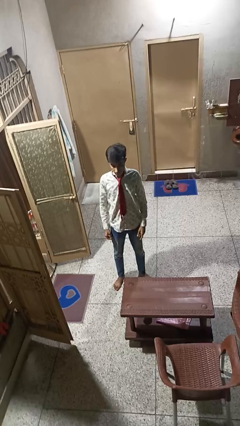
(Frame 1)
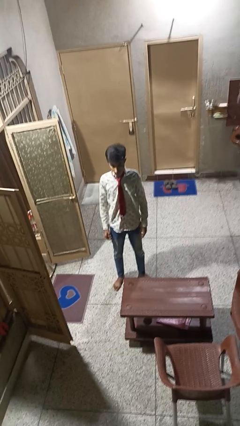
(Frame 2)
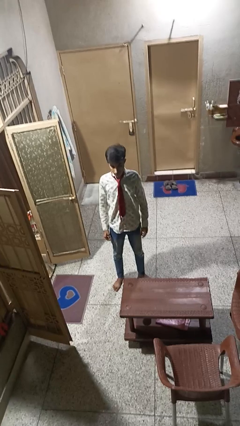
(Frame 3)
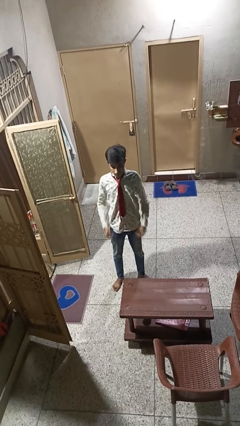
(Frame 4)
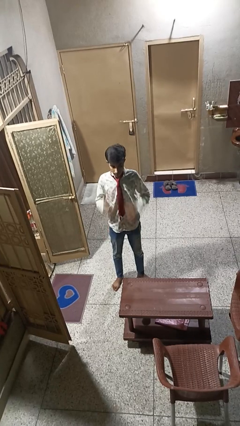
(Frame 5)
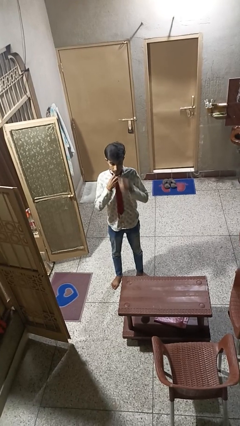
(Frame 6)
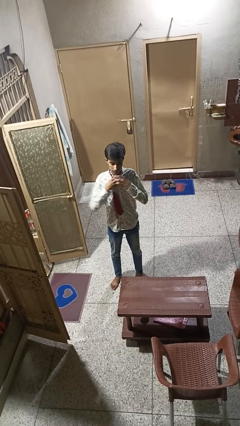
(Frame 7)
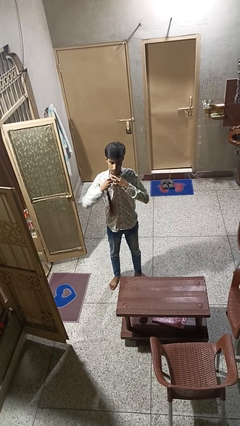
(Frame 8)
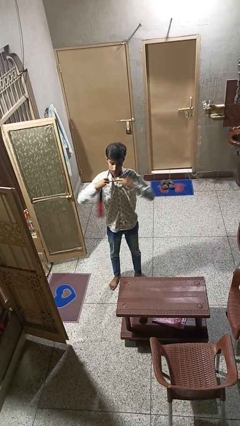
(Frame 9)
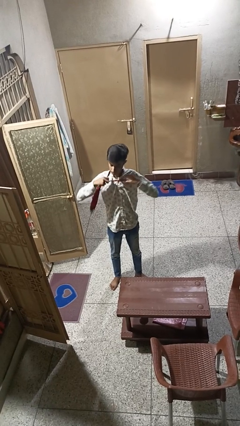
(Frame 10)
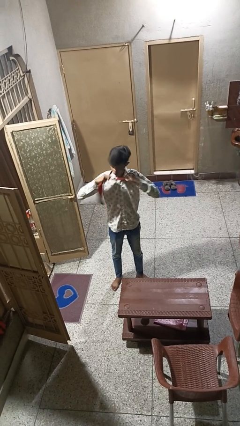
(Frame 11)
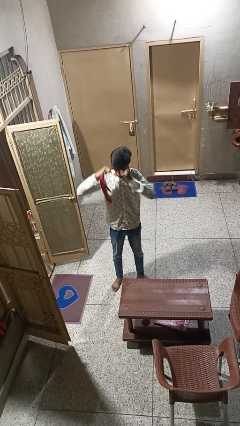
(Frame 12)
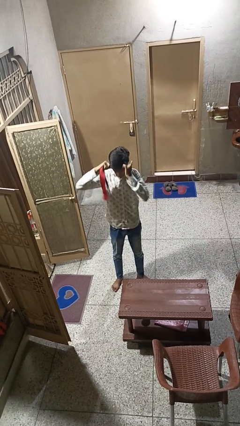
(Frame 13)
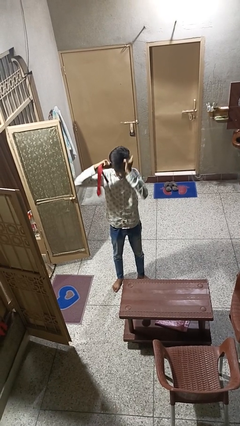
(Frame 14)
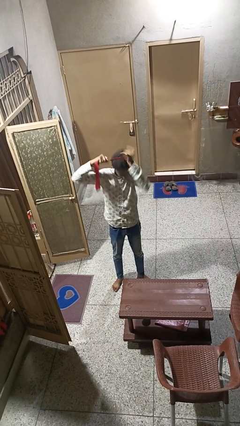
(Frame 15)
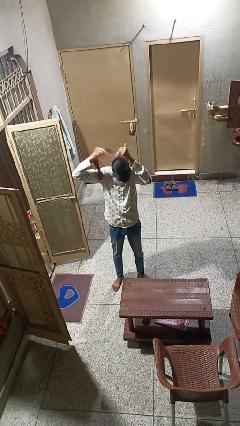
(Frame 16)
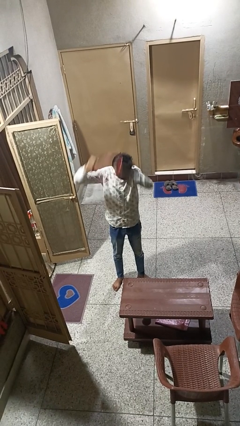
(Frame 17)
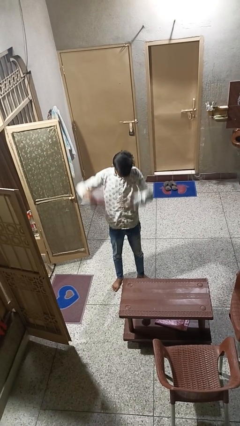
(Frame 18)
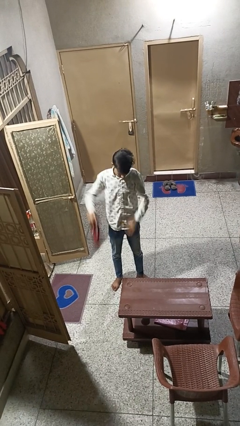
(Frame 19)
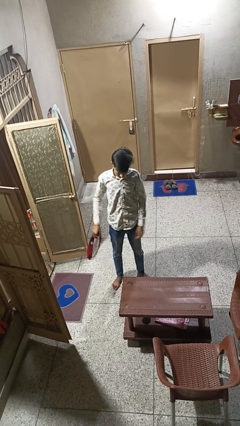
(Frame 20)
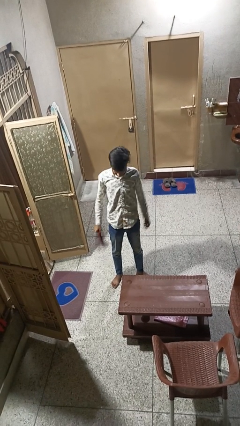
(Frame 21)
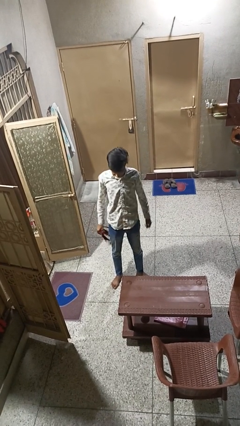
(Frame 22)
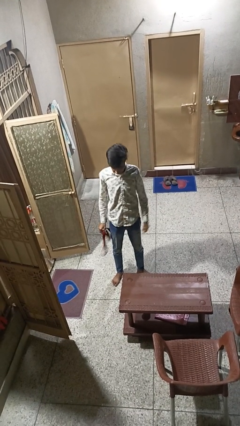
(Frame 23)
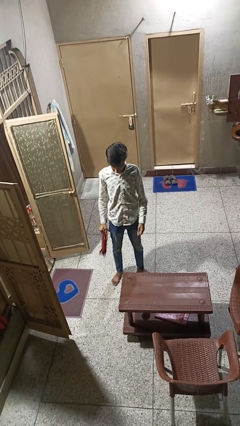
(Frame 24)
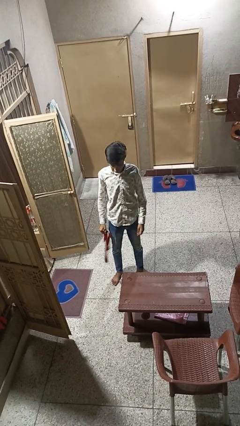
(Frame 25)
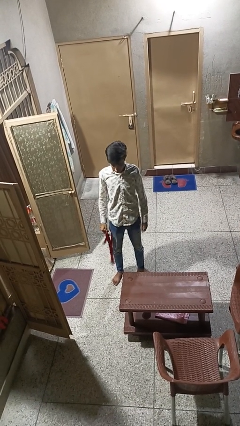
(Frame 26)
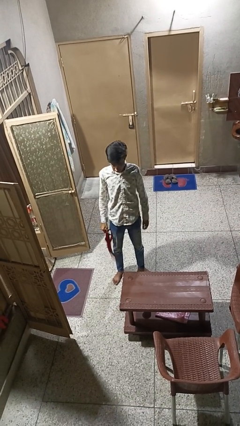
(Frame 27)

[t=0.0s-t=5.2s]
person takes off necktie

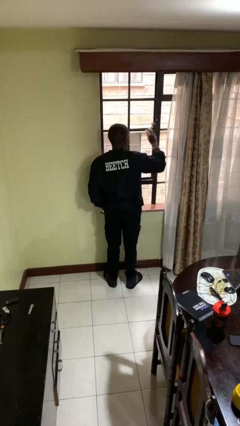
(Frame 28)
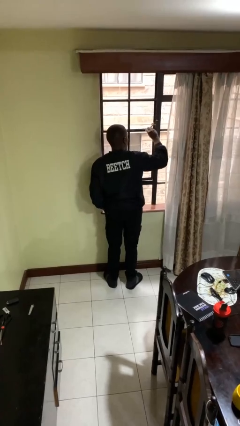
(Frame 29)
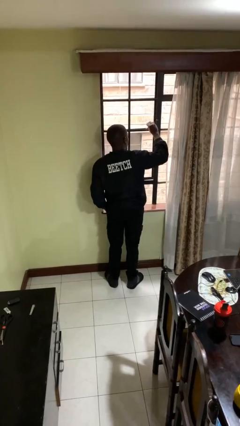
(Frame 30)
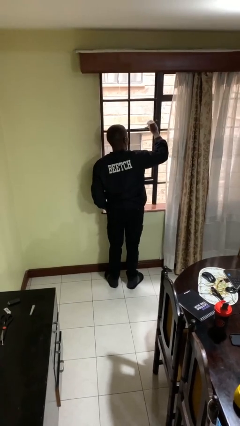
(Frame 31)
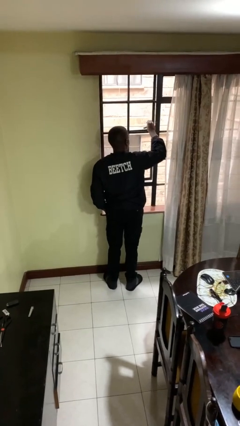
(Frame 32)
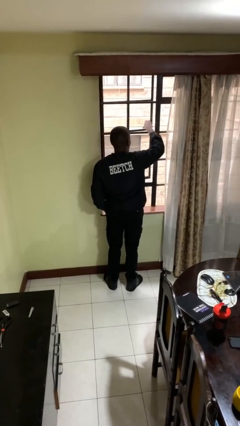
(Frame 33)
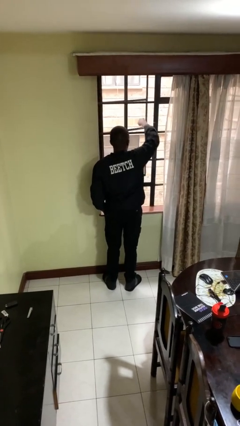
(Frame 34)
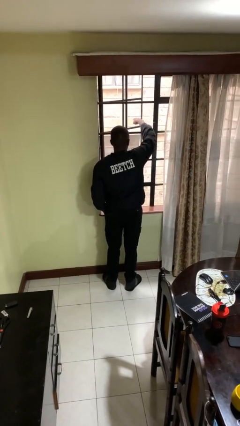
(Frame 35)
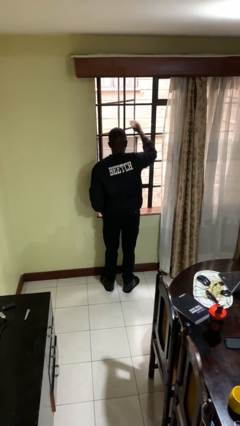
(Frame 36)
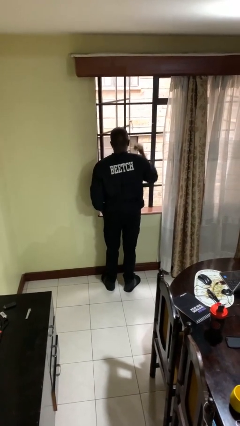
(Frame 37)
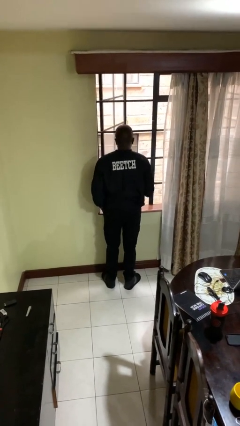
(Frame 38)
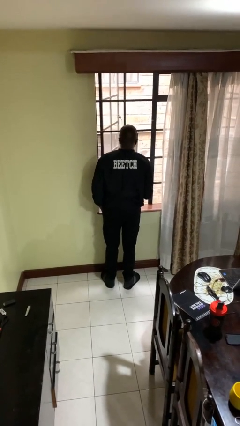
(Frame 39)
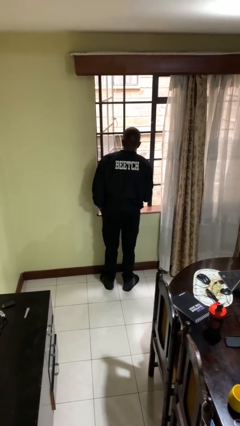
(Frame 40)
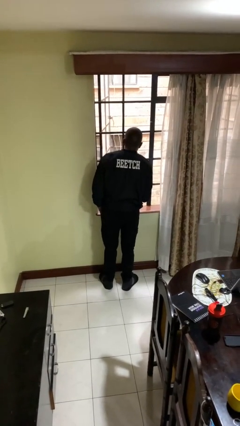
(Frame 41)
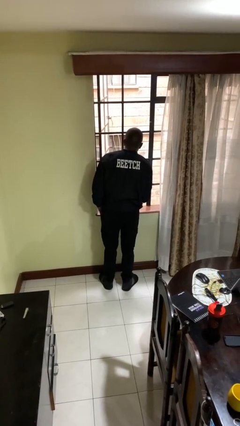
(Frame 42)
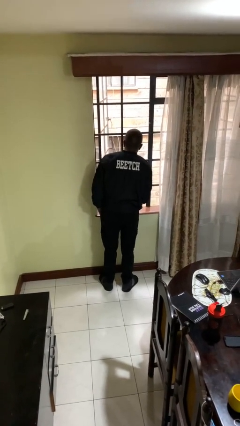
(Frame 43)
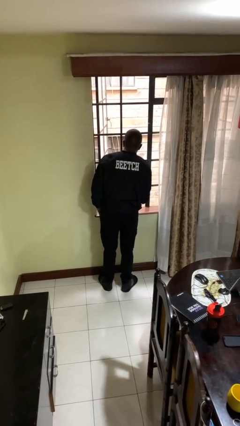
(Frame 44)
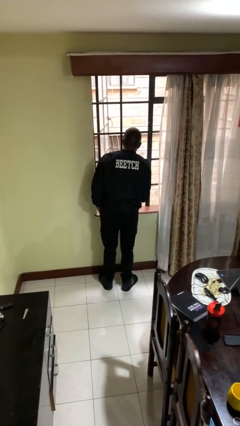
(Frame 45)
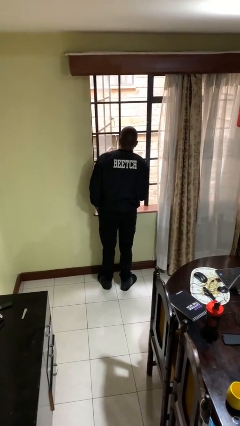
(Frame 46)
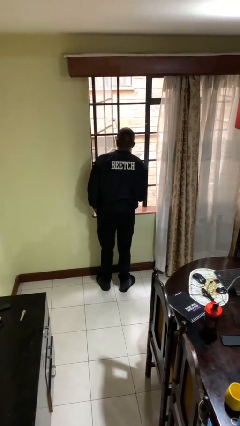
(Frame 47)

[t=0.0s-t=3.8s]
person opens home window

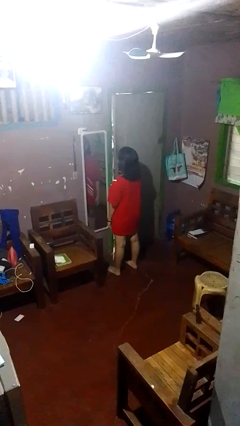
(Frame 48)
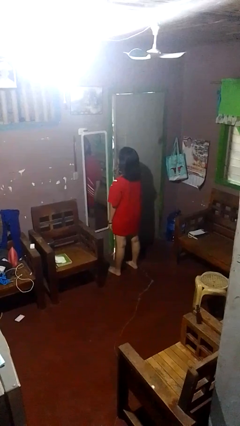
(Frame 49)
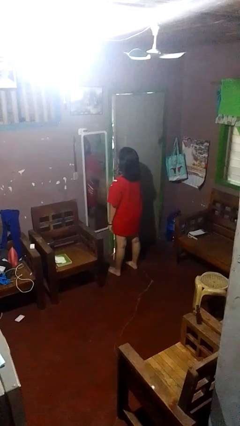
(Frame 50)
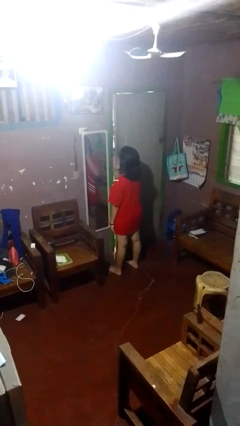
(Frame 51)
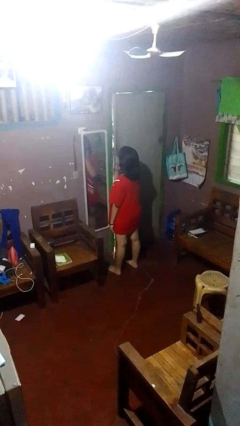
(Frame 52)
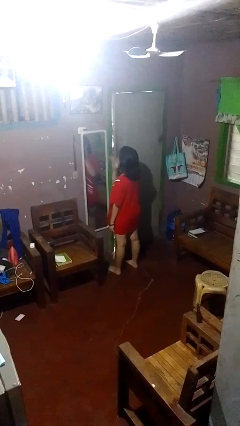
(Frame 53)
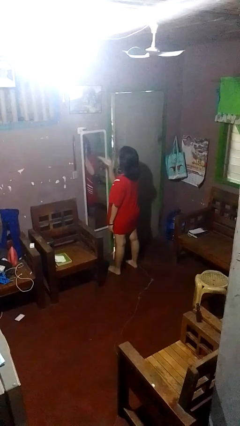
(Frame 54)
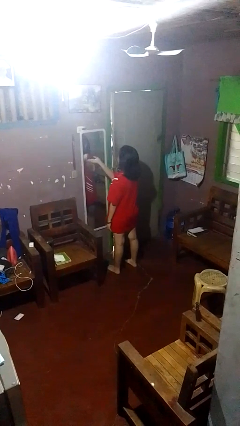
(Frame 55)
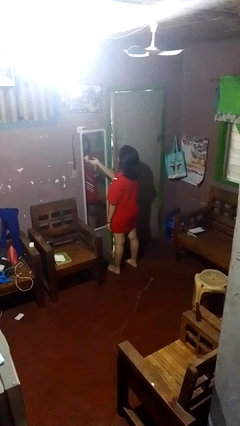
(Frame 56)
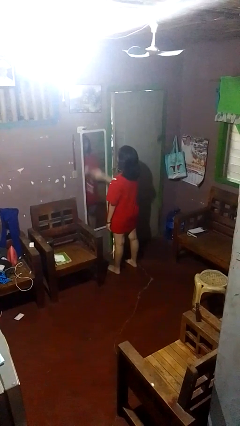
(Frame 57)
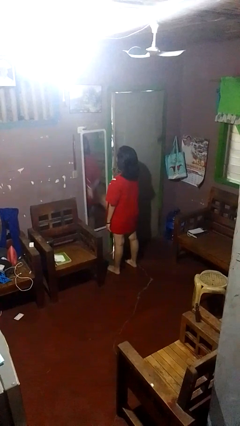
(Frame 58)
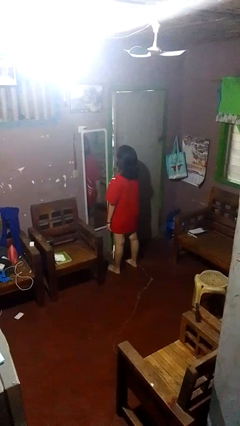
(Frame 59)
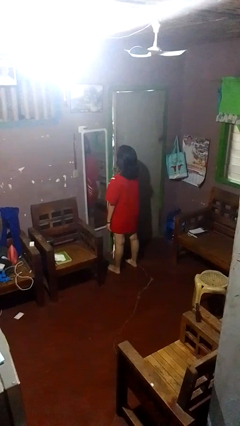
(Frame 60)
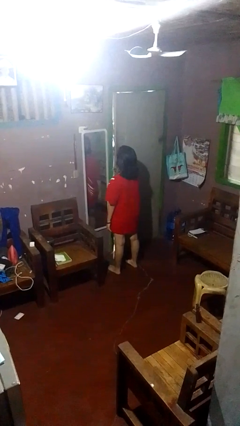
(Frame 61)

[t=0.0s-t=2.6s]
person gestures blow kiss

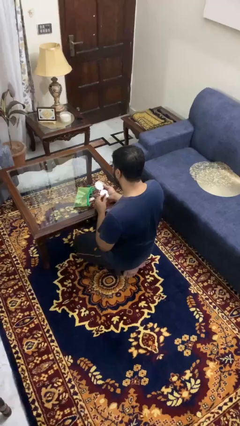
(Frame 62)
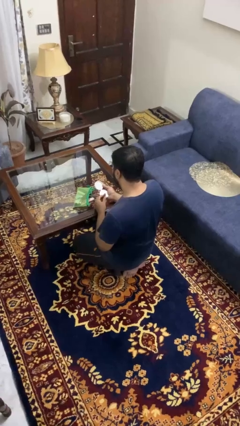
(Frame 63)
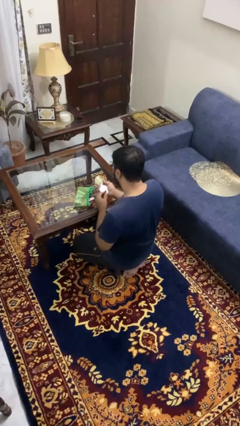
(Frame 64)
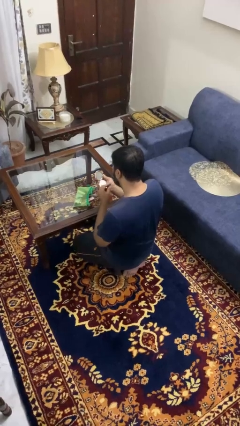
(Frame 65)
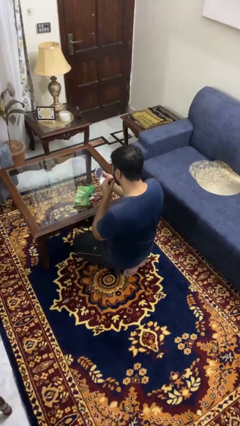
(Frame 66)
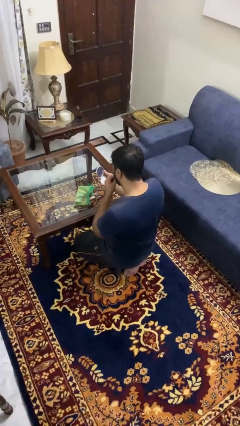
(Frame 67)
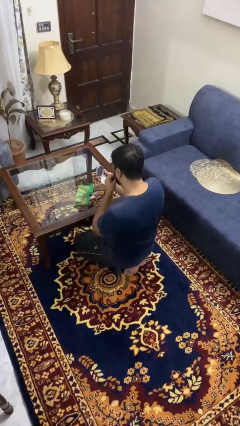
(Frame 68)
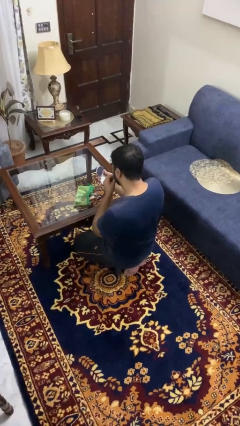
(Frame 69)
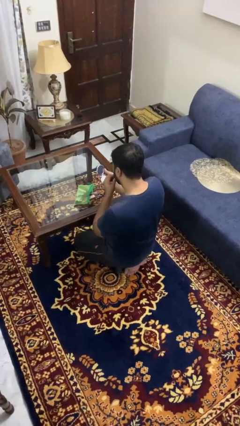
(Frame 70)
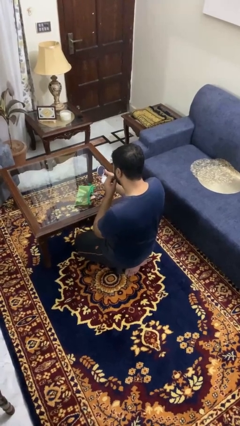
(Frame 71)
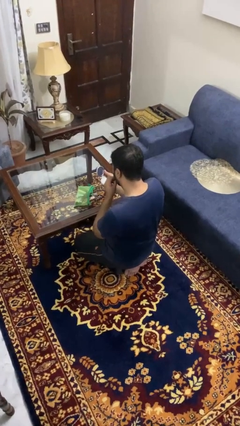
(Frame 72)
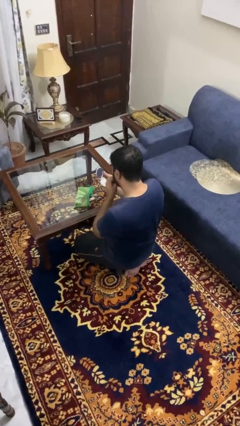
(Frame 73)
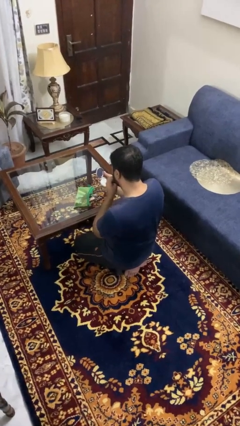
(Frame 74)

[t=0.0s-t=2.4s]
person applies lip makeup

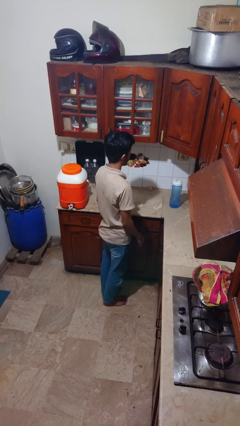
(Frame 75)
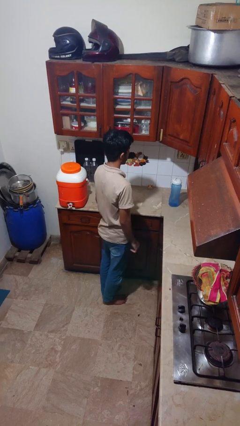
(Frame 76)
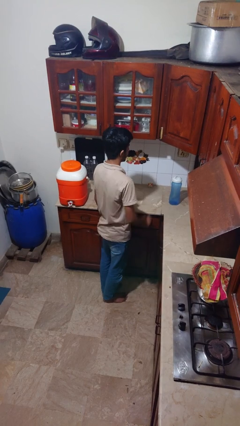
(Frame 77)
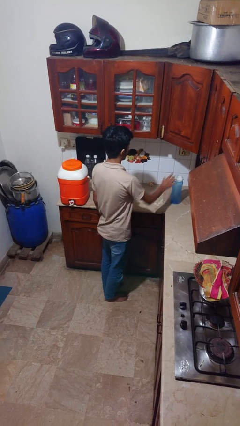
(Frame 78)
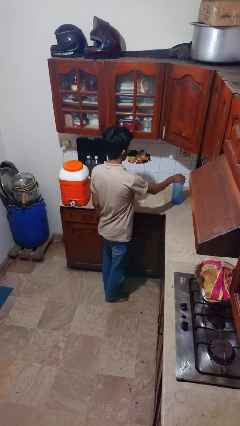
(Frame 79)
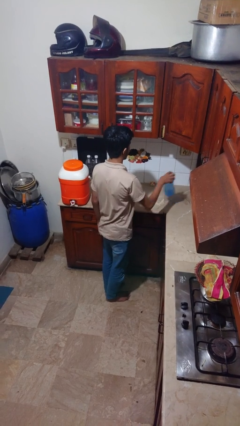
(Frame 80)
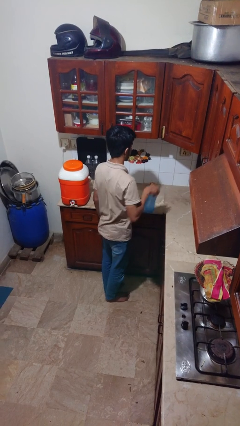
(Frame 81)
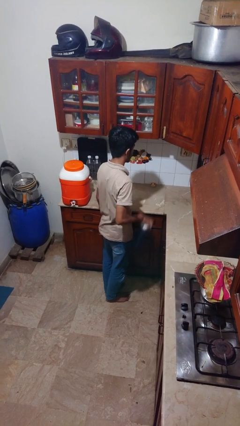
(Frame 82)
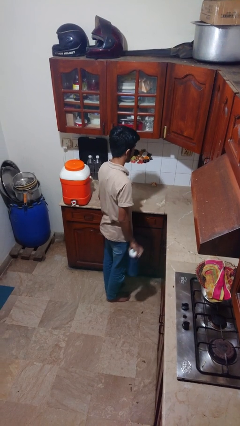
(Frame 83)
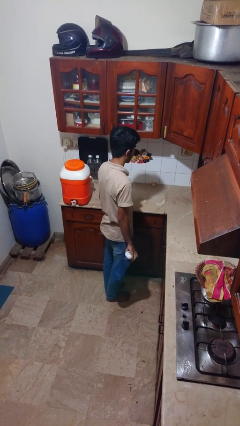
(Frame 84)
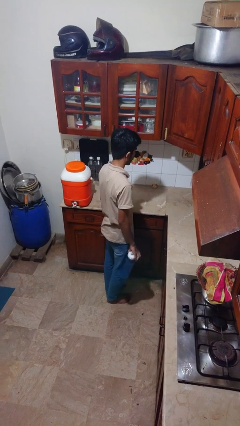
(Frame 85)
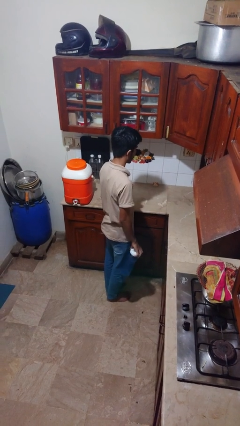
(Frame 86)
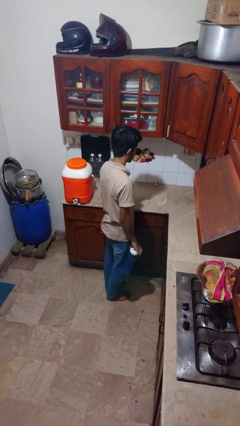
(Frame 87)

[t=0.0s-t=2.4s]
person picks up object from countertop

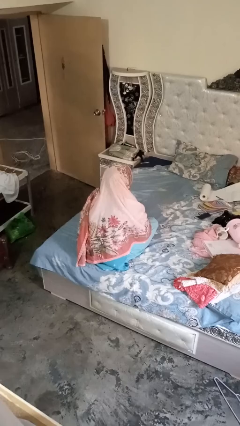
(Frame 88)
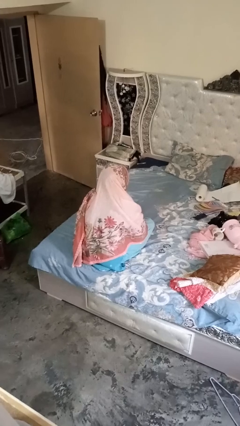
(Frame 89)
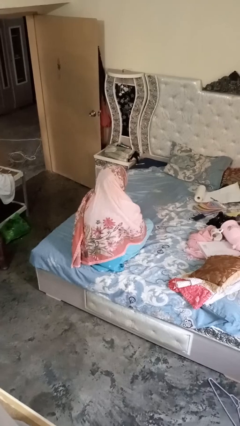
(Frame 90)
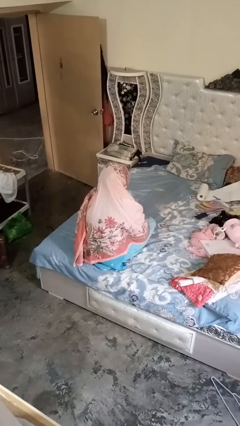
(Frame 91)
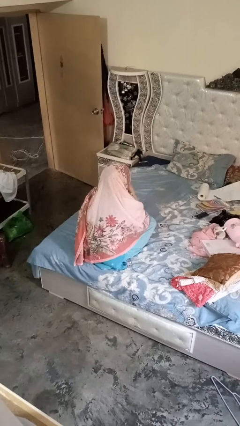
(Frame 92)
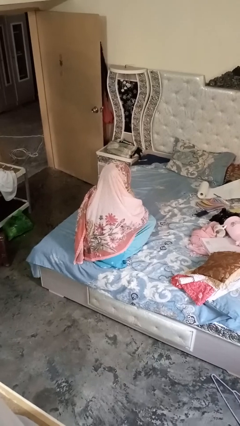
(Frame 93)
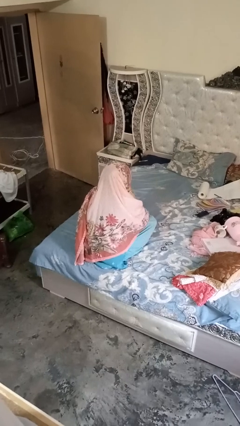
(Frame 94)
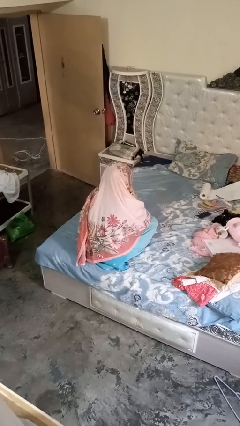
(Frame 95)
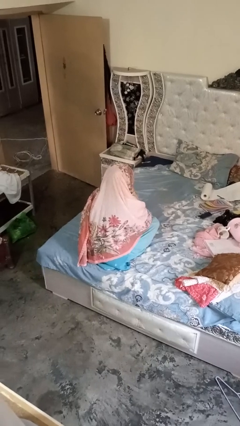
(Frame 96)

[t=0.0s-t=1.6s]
person blows nose
